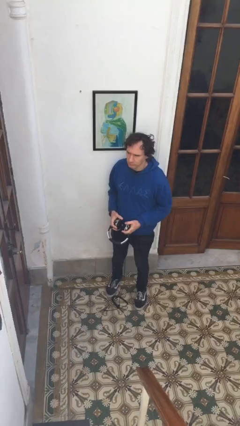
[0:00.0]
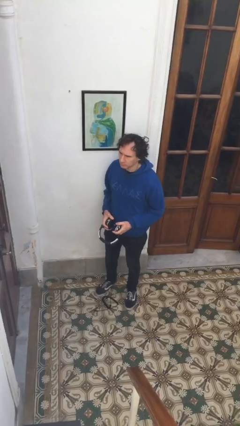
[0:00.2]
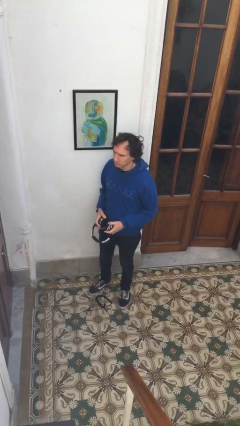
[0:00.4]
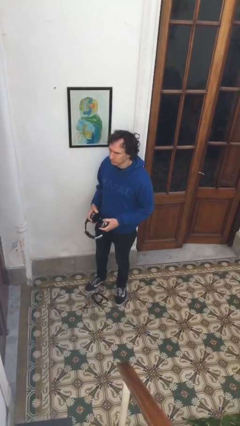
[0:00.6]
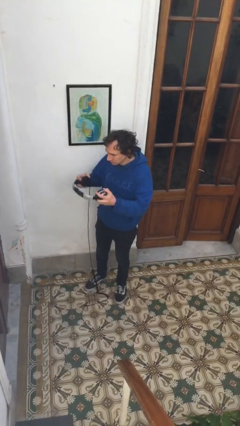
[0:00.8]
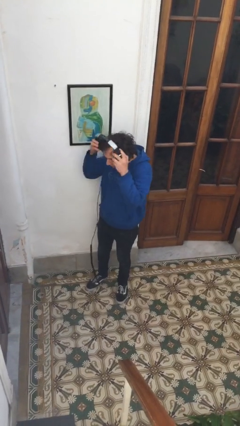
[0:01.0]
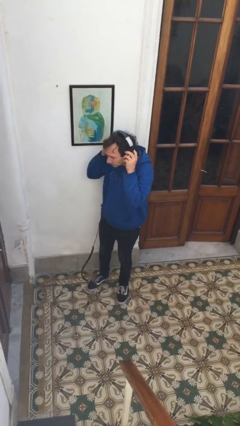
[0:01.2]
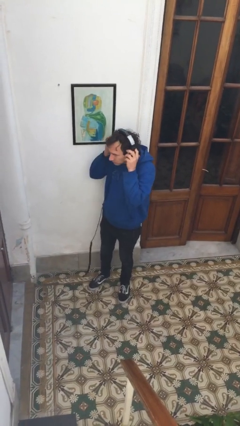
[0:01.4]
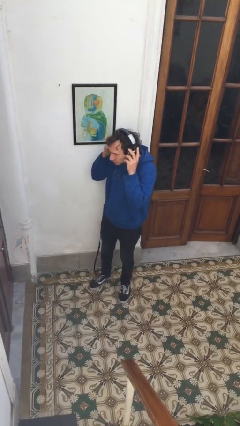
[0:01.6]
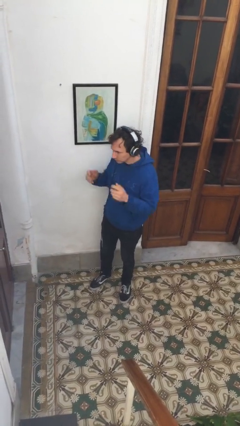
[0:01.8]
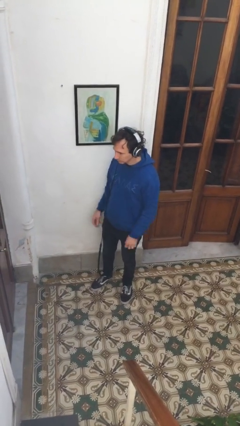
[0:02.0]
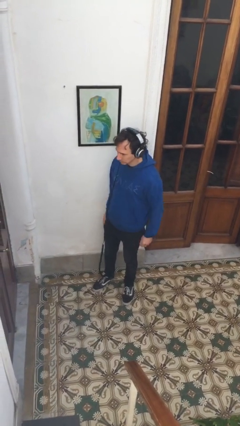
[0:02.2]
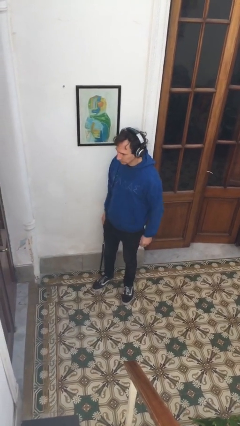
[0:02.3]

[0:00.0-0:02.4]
person puts on headphones

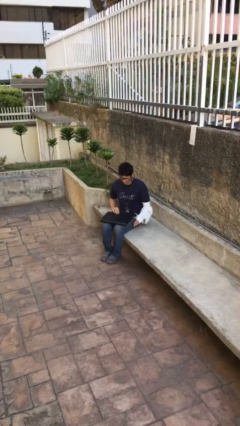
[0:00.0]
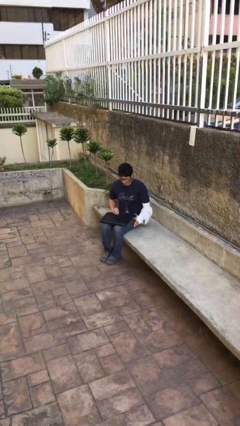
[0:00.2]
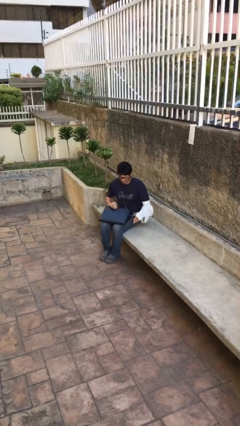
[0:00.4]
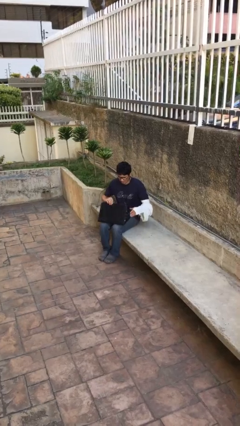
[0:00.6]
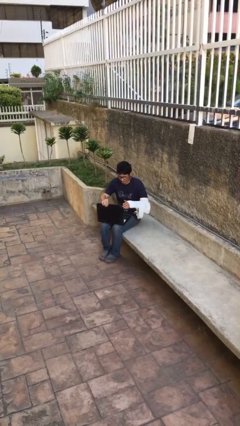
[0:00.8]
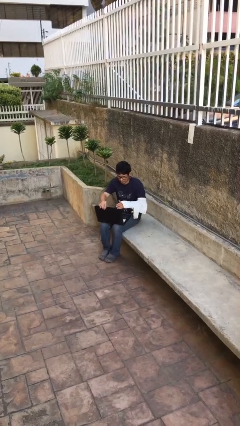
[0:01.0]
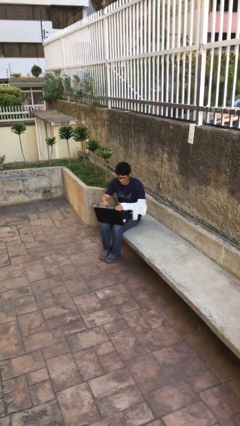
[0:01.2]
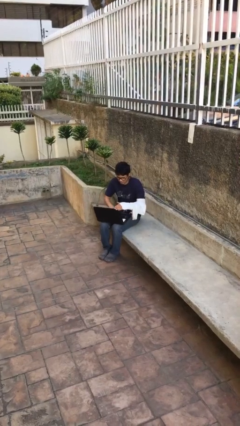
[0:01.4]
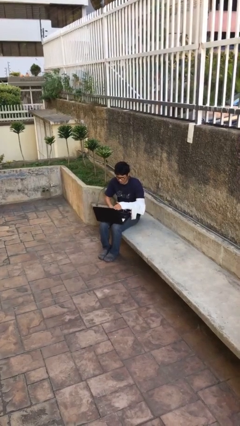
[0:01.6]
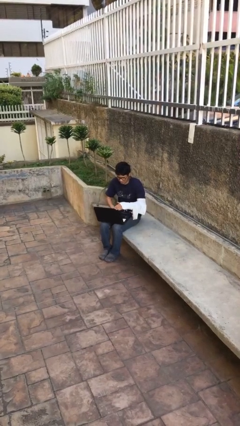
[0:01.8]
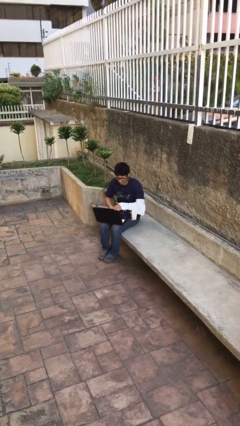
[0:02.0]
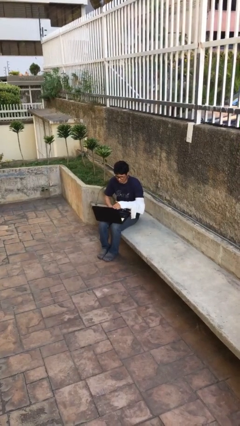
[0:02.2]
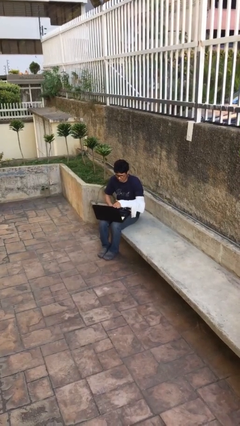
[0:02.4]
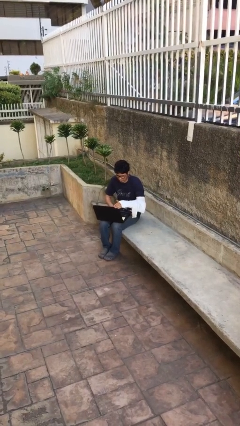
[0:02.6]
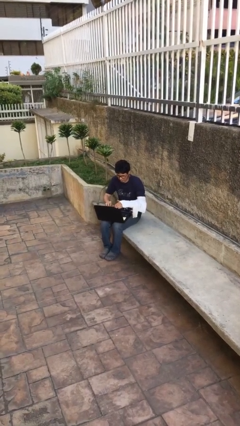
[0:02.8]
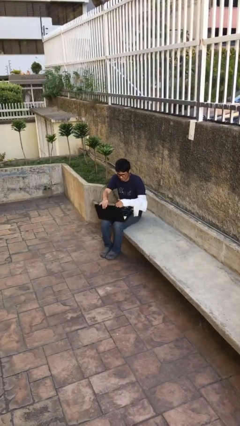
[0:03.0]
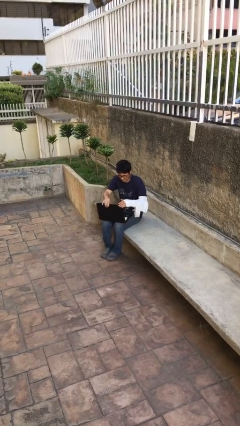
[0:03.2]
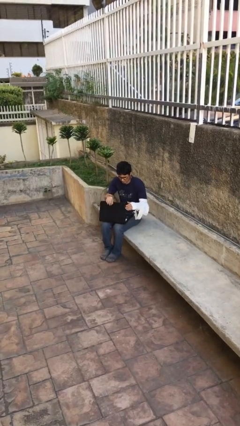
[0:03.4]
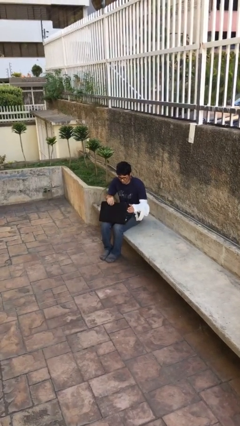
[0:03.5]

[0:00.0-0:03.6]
person interacts with laptop

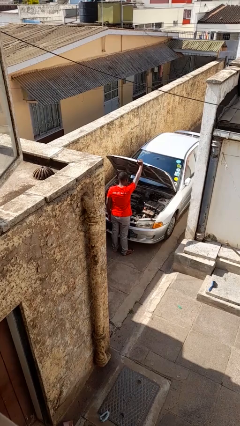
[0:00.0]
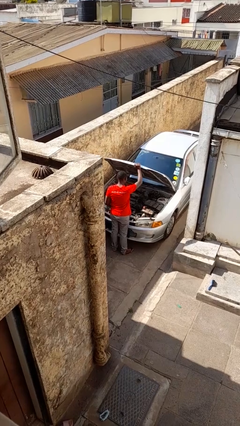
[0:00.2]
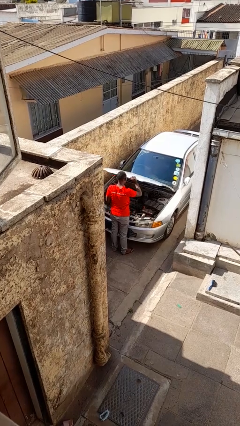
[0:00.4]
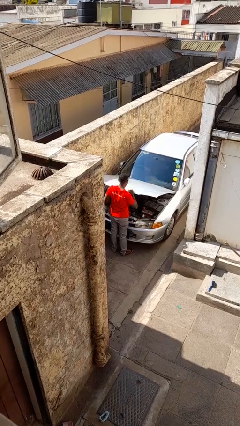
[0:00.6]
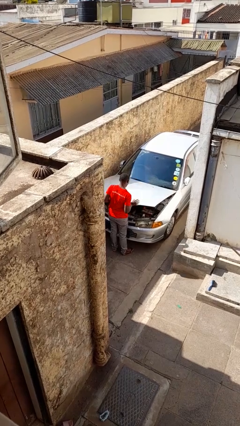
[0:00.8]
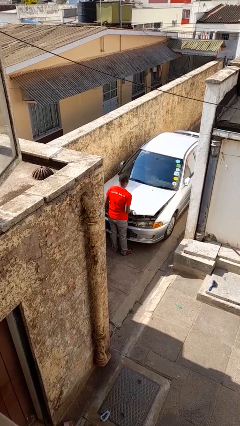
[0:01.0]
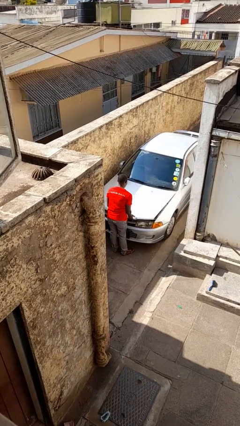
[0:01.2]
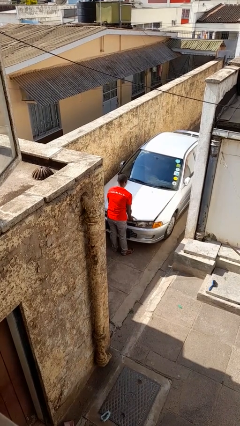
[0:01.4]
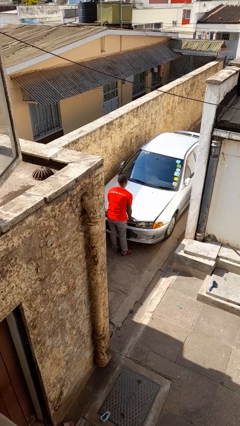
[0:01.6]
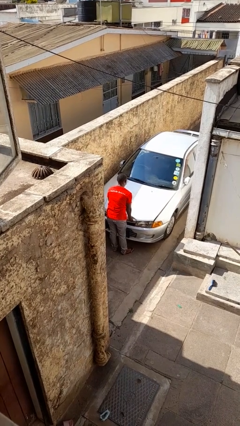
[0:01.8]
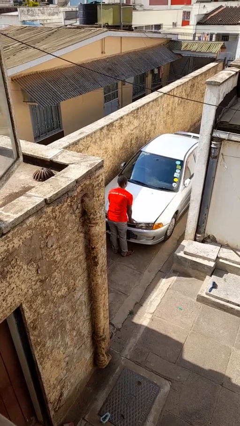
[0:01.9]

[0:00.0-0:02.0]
person closes car hood

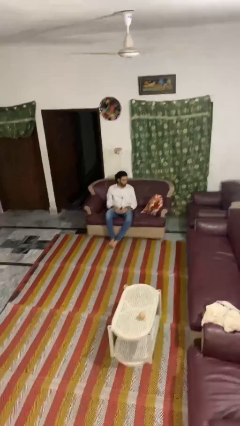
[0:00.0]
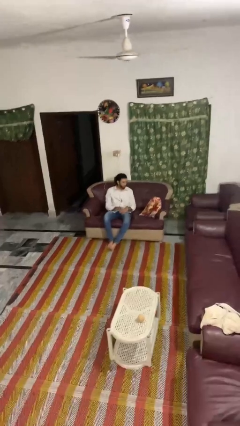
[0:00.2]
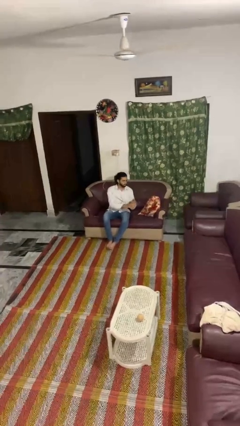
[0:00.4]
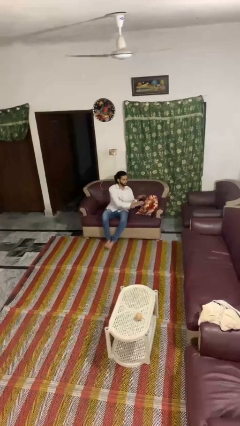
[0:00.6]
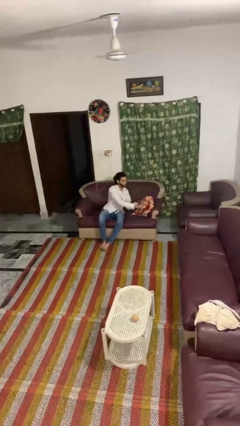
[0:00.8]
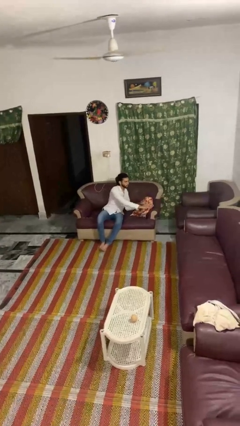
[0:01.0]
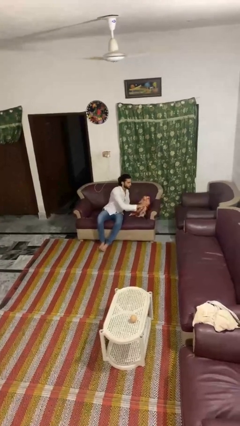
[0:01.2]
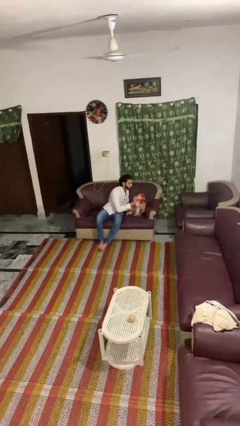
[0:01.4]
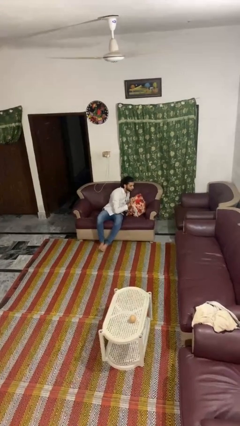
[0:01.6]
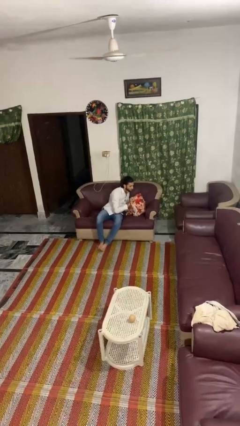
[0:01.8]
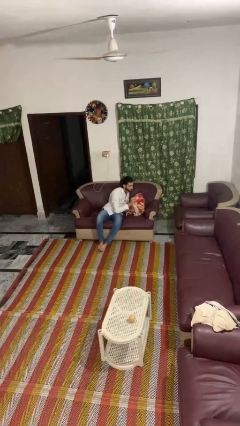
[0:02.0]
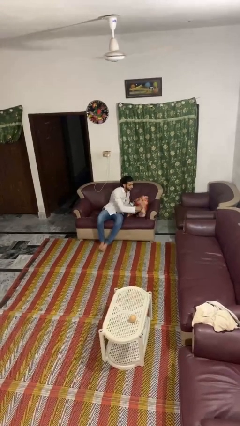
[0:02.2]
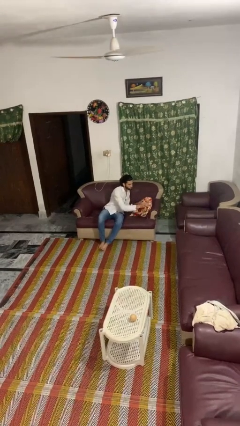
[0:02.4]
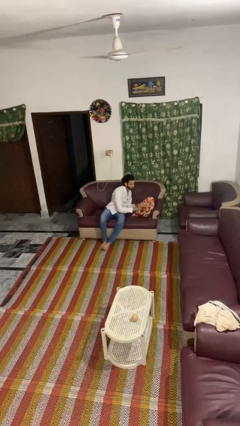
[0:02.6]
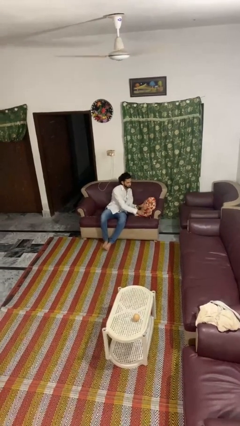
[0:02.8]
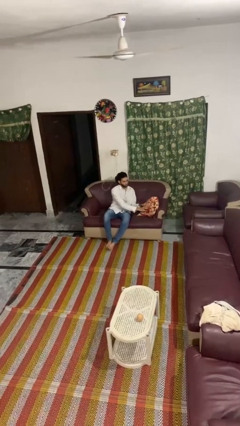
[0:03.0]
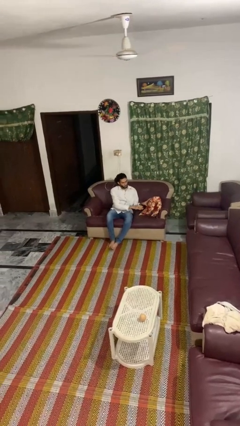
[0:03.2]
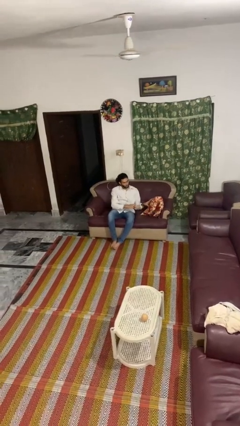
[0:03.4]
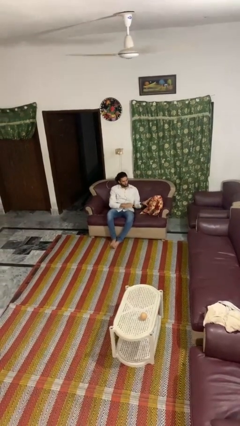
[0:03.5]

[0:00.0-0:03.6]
person searches in couch

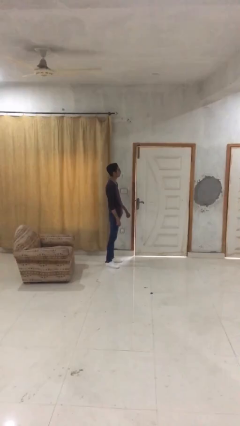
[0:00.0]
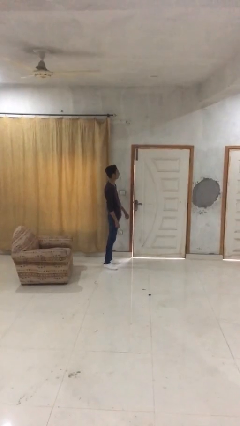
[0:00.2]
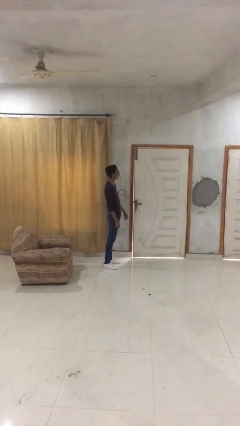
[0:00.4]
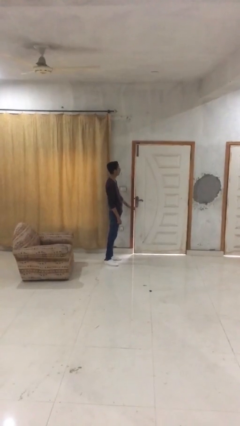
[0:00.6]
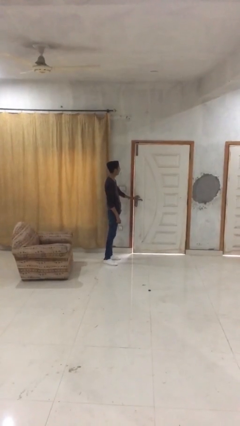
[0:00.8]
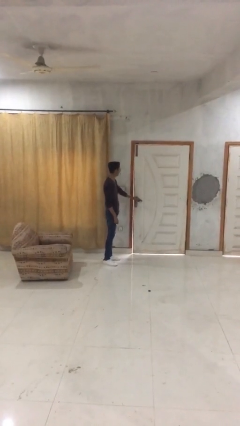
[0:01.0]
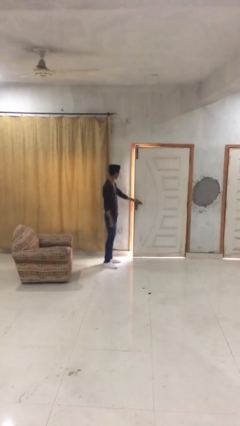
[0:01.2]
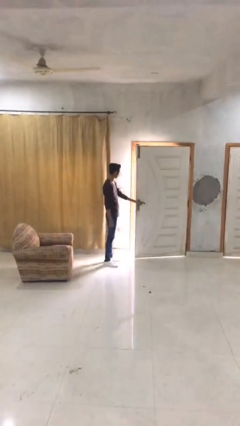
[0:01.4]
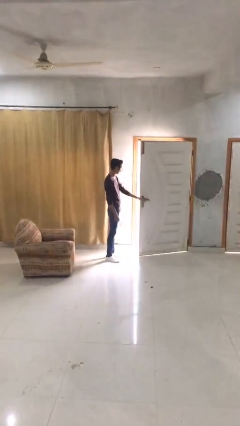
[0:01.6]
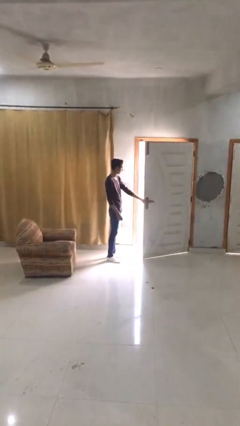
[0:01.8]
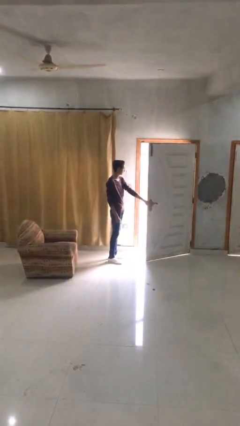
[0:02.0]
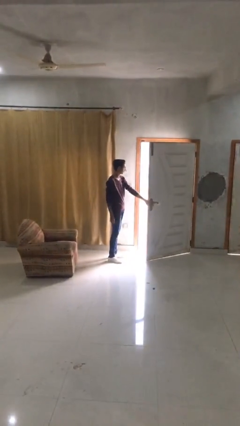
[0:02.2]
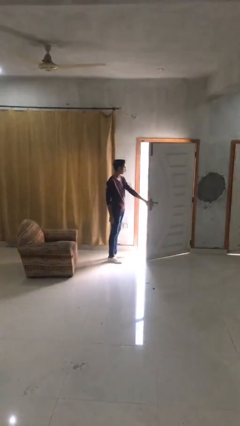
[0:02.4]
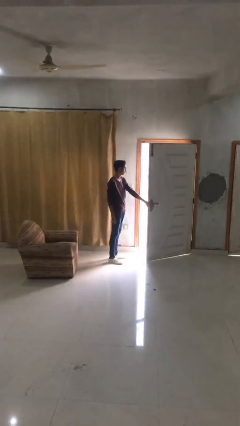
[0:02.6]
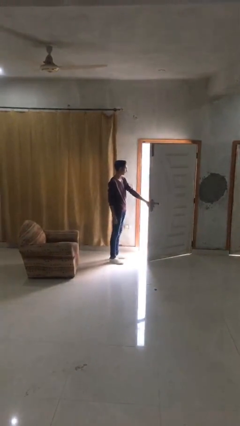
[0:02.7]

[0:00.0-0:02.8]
person opens facility door

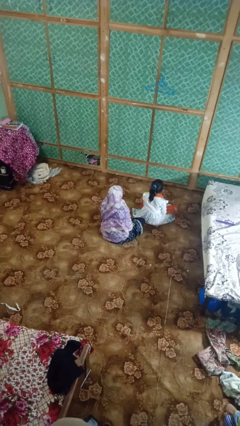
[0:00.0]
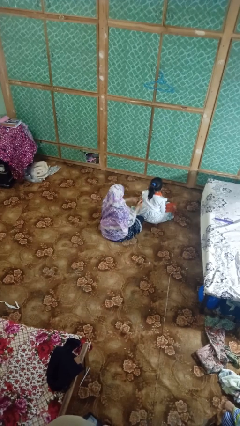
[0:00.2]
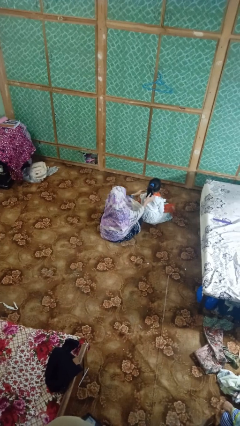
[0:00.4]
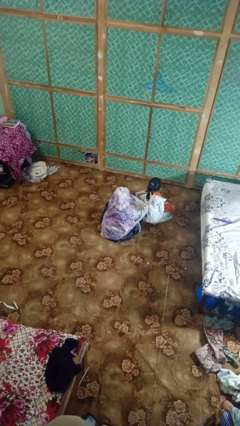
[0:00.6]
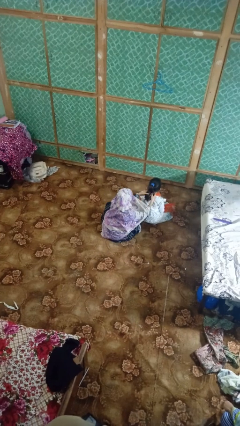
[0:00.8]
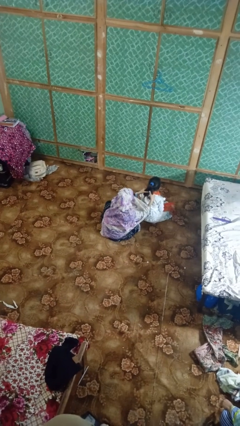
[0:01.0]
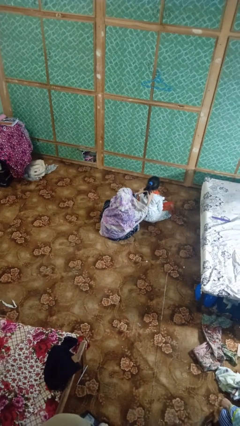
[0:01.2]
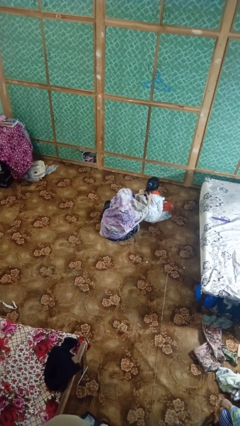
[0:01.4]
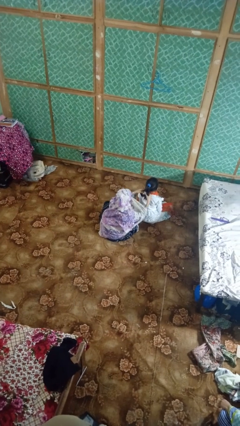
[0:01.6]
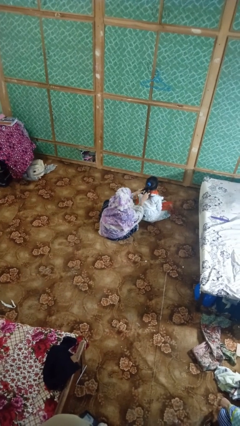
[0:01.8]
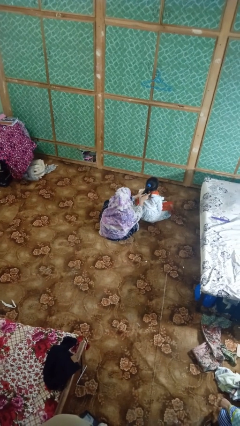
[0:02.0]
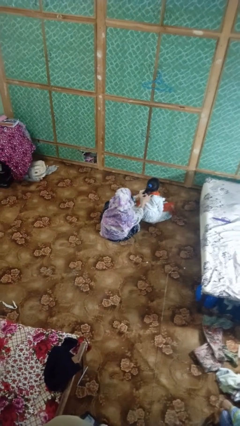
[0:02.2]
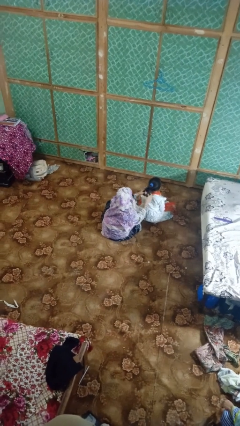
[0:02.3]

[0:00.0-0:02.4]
person braids hair of person

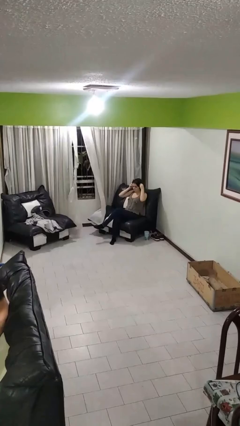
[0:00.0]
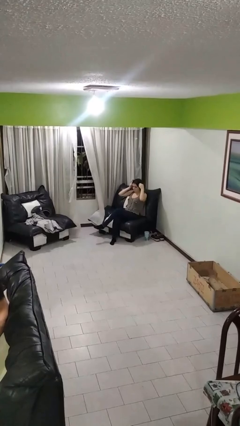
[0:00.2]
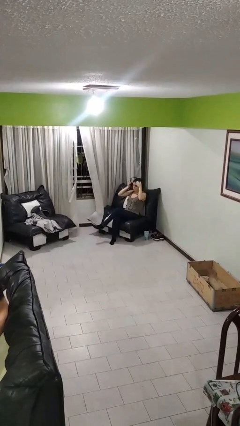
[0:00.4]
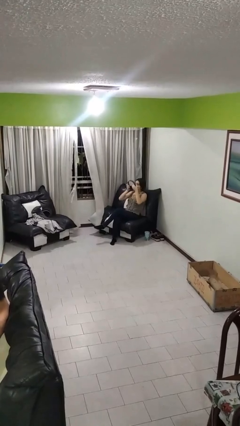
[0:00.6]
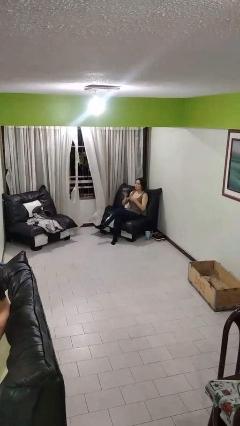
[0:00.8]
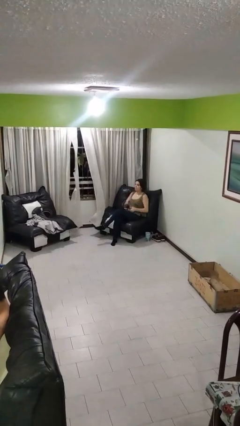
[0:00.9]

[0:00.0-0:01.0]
person takes off headphones
